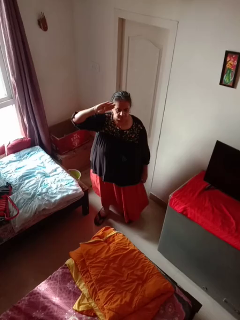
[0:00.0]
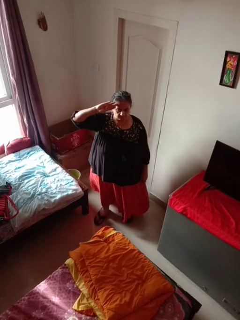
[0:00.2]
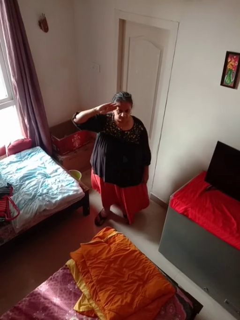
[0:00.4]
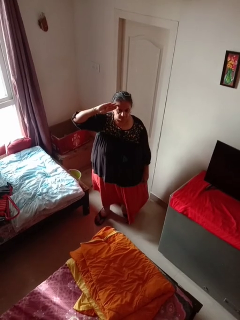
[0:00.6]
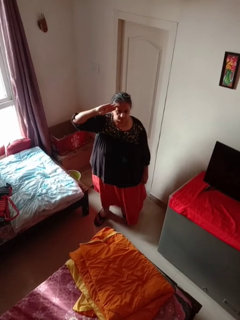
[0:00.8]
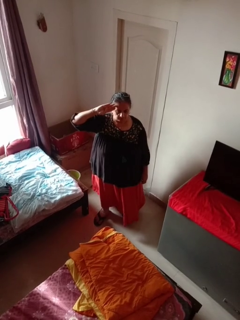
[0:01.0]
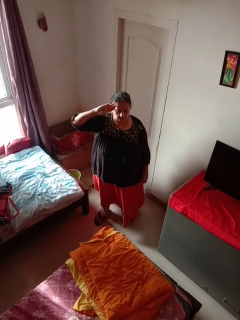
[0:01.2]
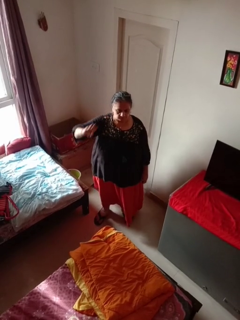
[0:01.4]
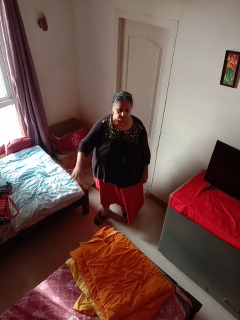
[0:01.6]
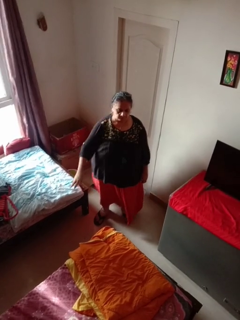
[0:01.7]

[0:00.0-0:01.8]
person salutes

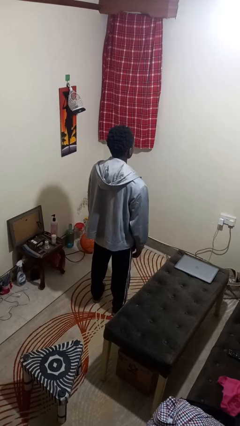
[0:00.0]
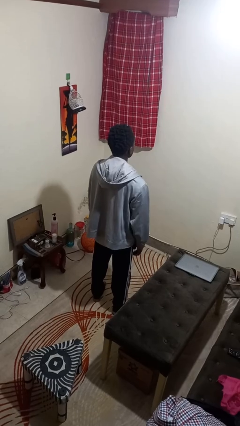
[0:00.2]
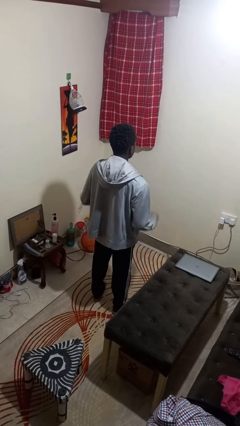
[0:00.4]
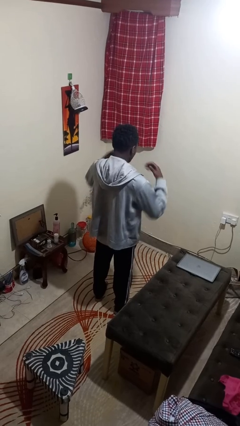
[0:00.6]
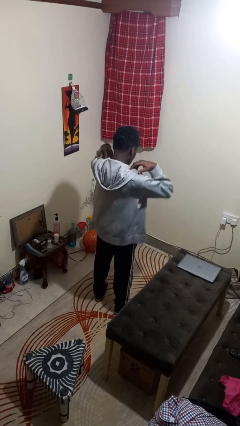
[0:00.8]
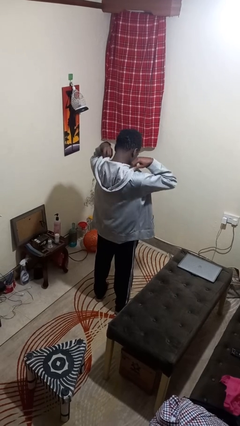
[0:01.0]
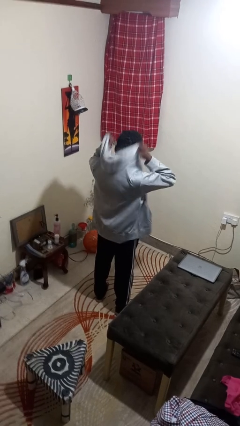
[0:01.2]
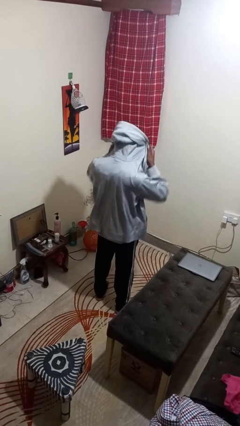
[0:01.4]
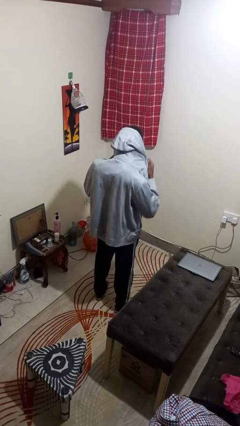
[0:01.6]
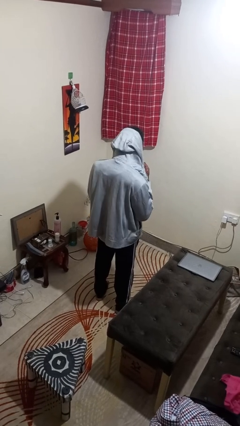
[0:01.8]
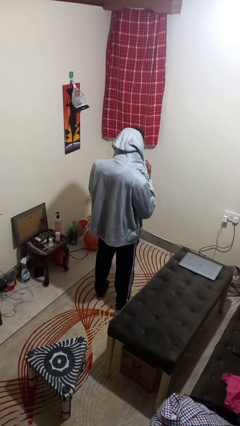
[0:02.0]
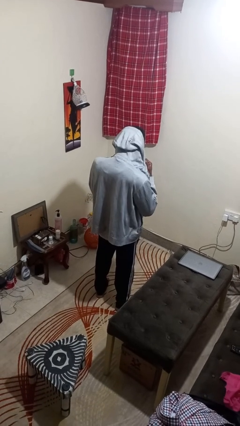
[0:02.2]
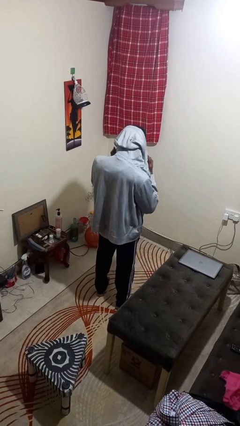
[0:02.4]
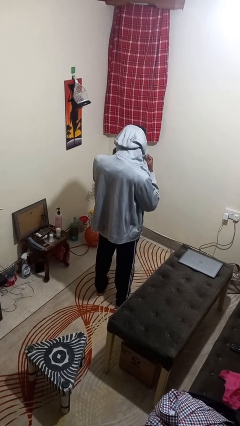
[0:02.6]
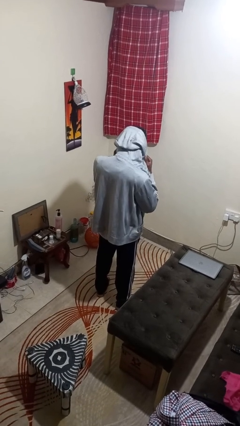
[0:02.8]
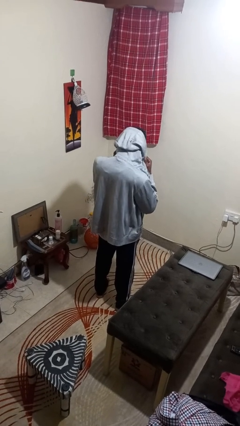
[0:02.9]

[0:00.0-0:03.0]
person puts on hoodie

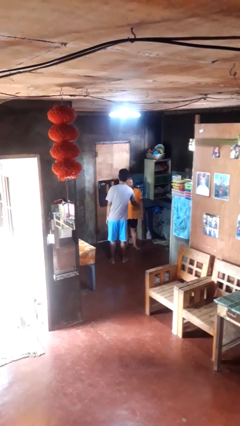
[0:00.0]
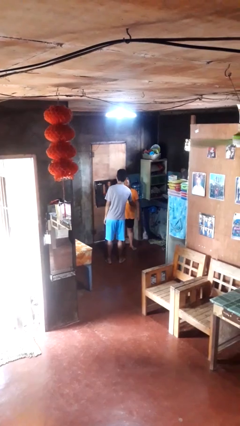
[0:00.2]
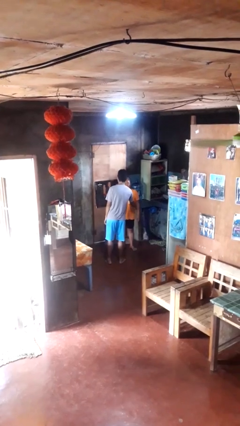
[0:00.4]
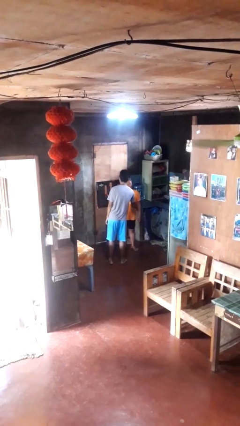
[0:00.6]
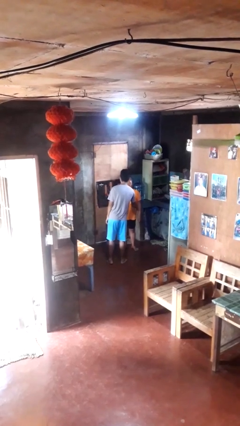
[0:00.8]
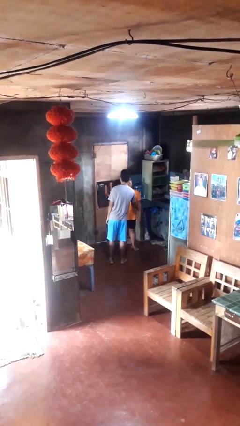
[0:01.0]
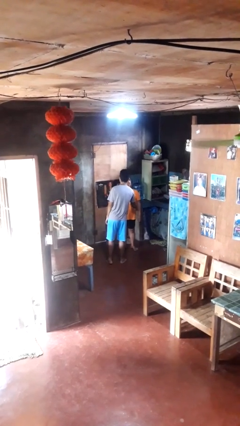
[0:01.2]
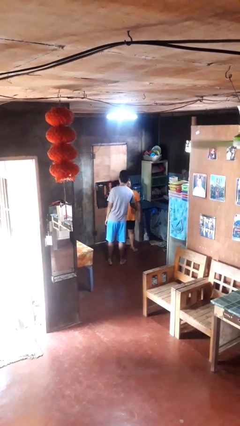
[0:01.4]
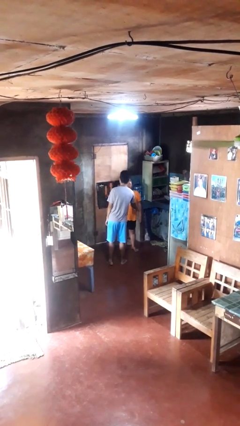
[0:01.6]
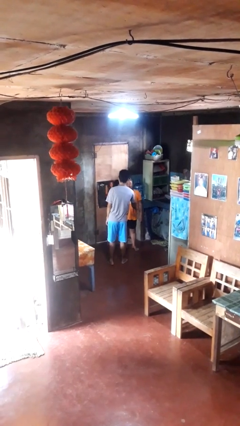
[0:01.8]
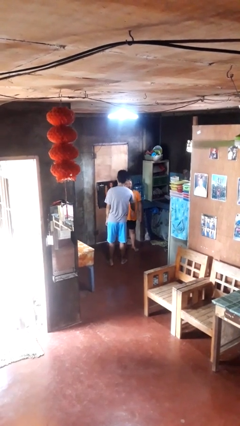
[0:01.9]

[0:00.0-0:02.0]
person tickles person

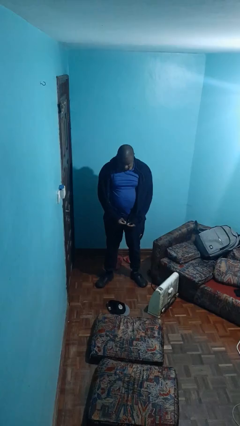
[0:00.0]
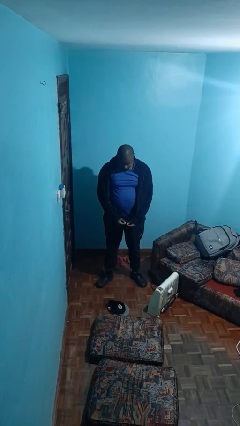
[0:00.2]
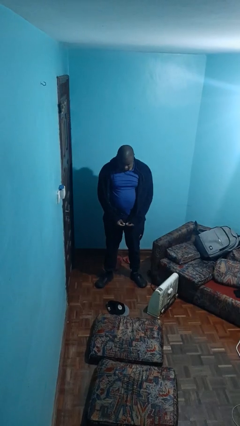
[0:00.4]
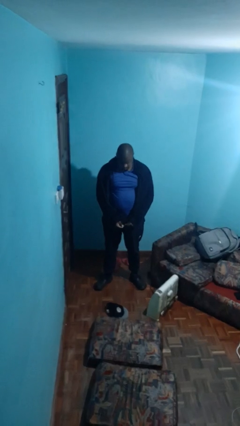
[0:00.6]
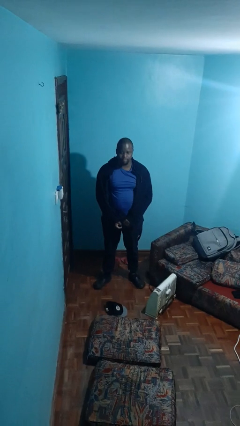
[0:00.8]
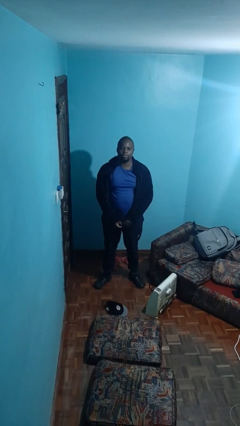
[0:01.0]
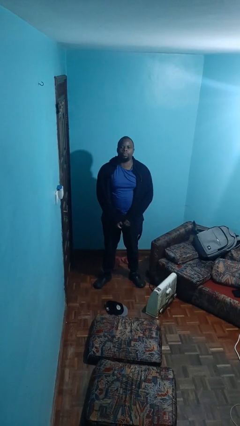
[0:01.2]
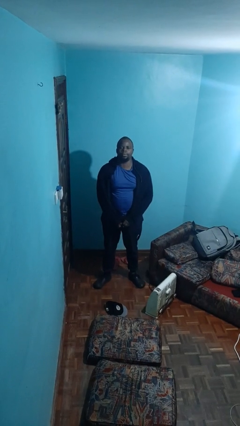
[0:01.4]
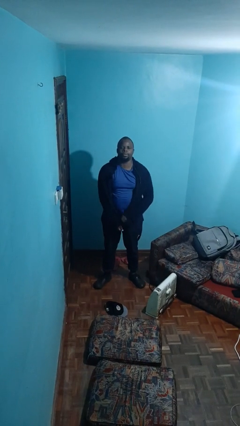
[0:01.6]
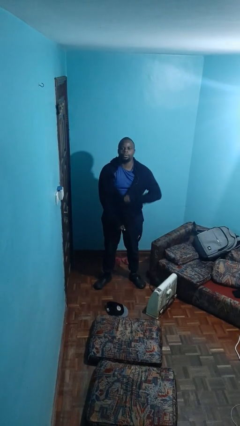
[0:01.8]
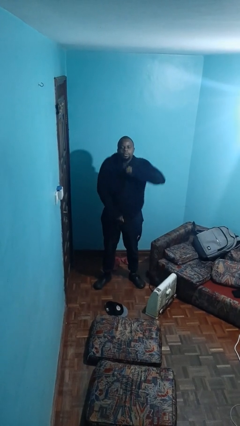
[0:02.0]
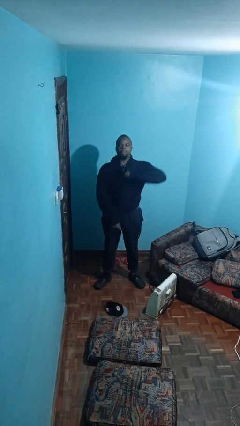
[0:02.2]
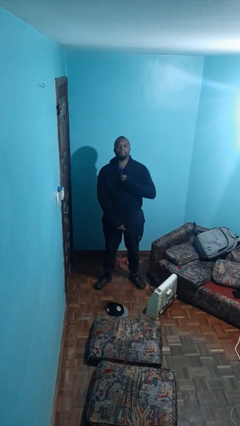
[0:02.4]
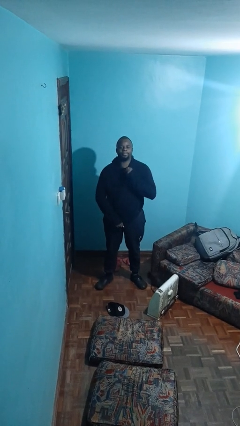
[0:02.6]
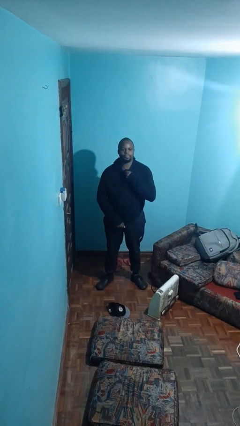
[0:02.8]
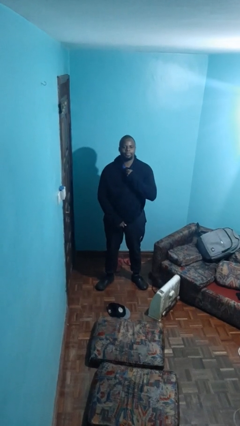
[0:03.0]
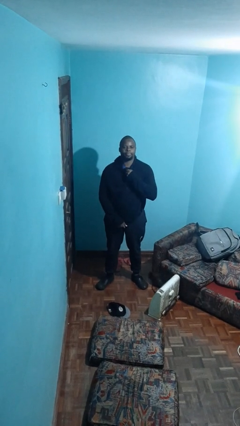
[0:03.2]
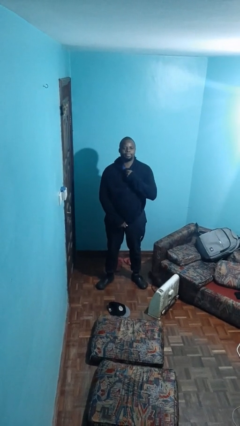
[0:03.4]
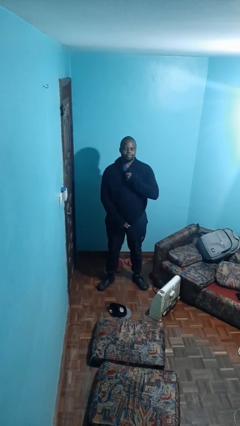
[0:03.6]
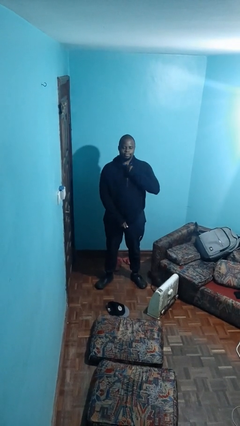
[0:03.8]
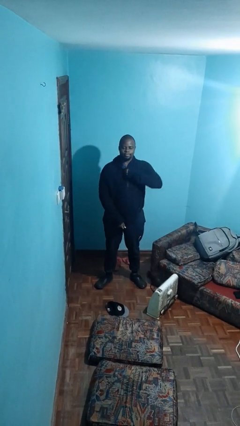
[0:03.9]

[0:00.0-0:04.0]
person zips up jacket

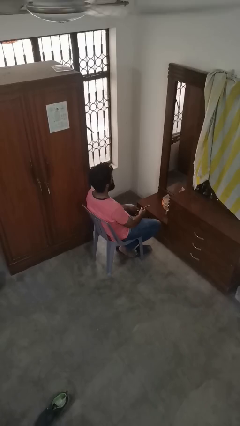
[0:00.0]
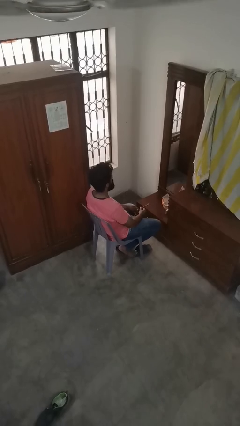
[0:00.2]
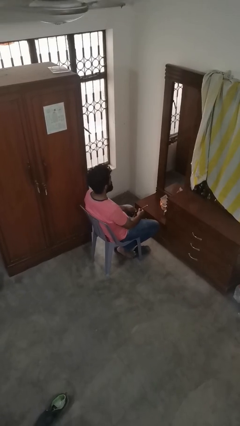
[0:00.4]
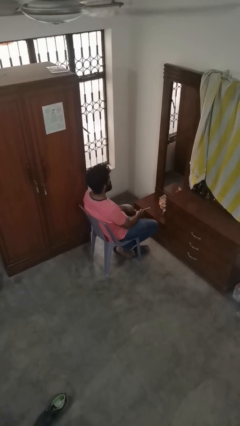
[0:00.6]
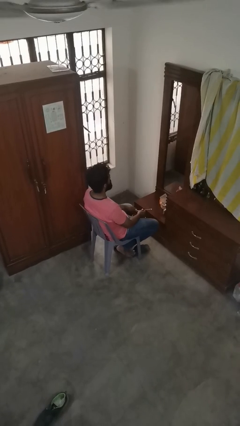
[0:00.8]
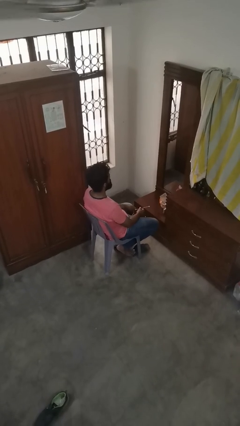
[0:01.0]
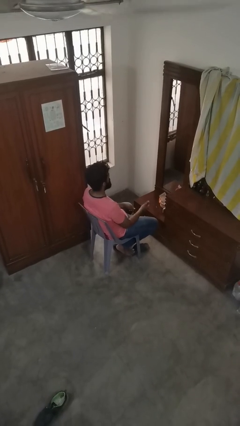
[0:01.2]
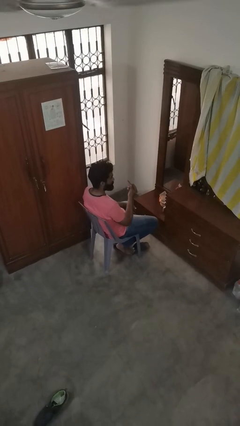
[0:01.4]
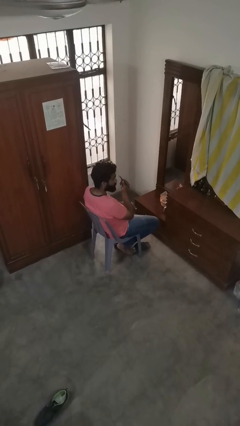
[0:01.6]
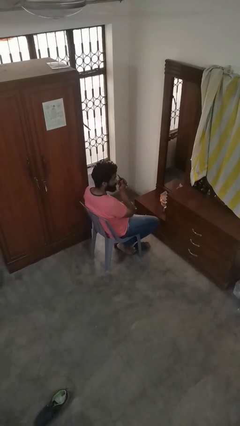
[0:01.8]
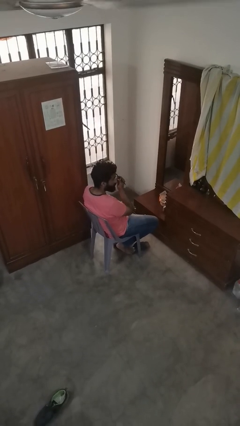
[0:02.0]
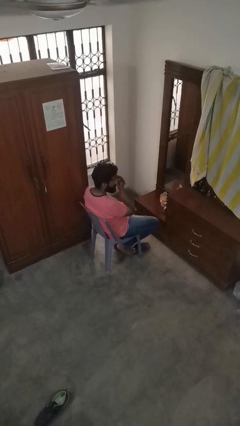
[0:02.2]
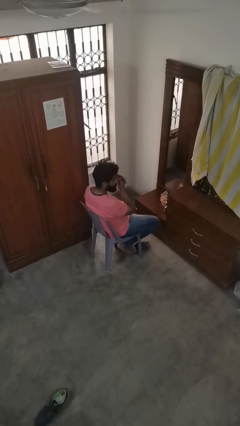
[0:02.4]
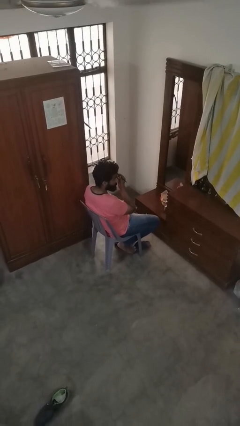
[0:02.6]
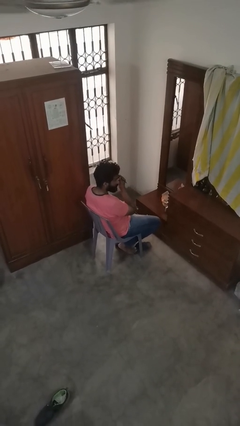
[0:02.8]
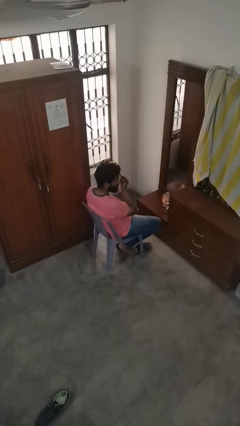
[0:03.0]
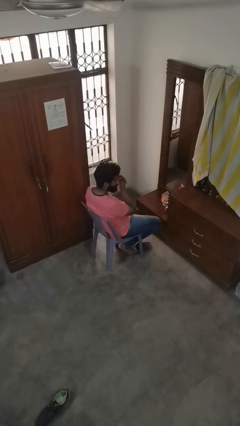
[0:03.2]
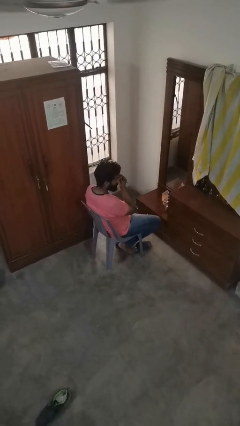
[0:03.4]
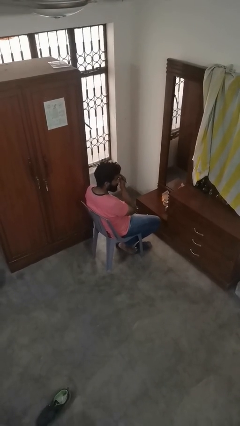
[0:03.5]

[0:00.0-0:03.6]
person applies eye makeup

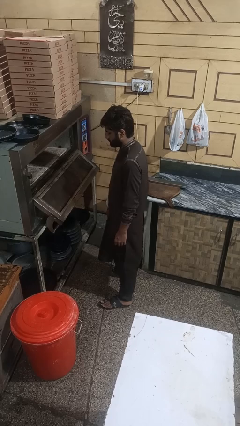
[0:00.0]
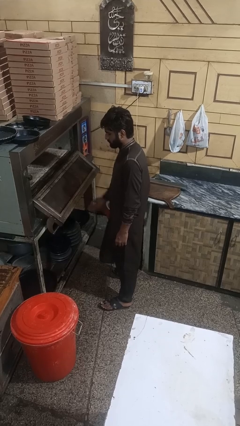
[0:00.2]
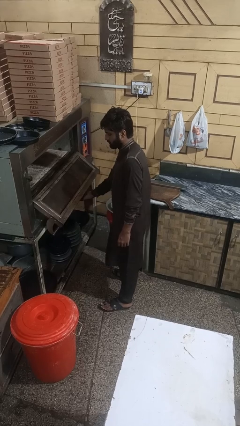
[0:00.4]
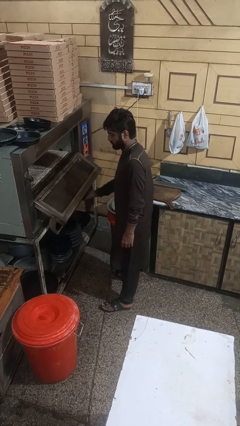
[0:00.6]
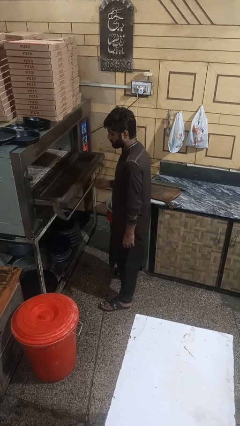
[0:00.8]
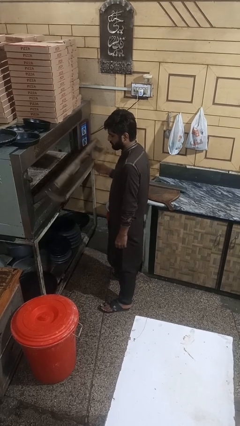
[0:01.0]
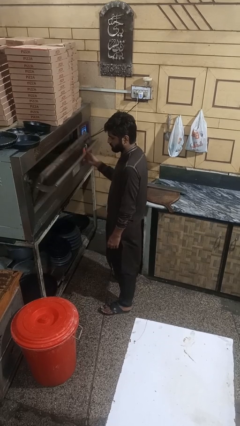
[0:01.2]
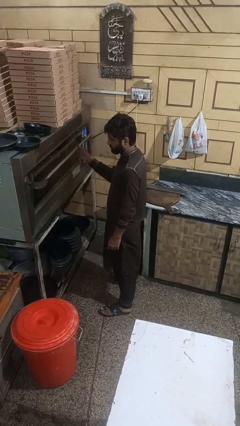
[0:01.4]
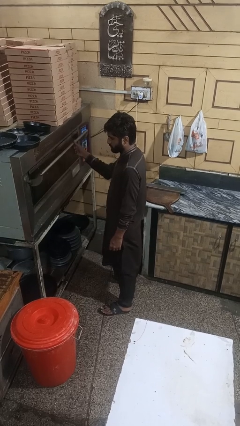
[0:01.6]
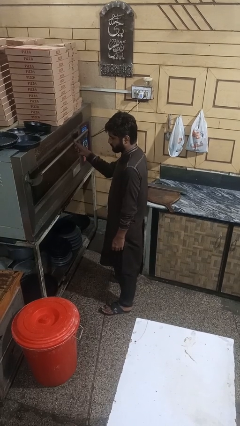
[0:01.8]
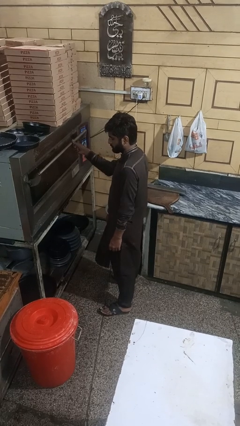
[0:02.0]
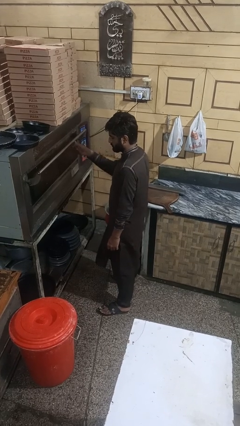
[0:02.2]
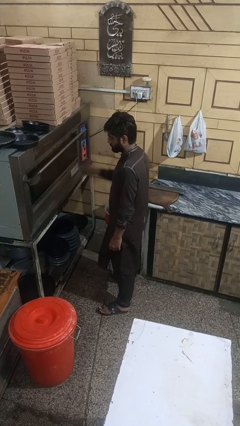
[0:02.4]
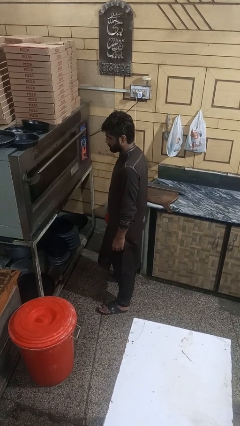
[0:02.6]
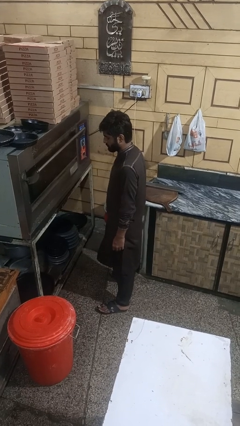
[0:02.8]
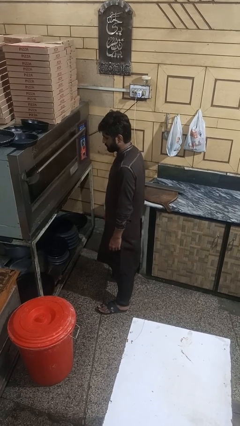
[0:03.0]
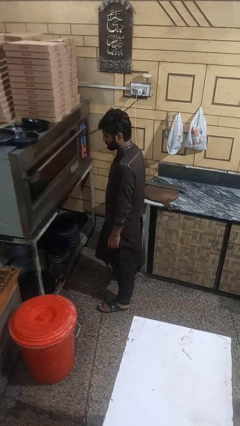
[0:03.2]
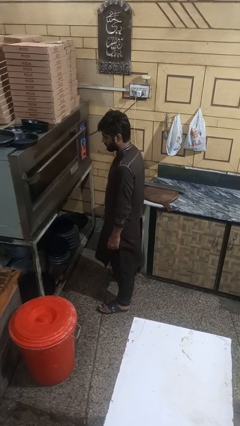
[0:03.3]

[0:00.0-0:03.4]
person closes microwave
